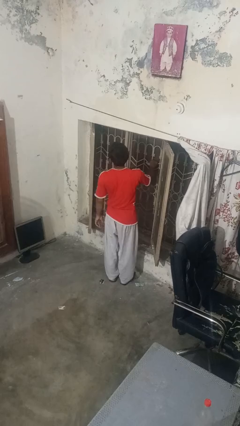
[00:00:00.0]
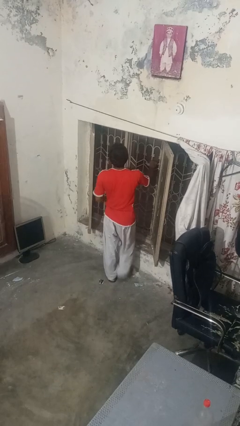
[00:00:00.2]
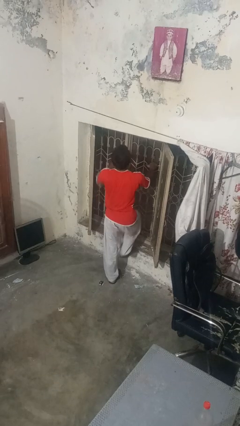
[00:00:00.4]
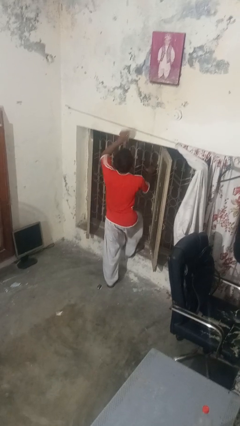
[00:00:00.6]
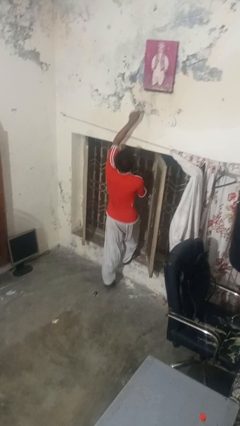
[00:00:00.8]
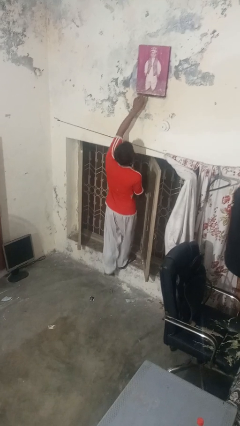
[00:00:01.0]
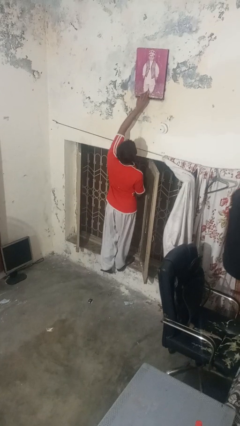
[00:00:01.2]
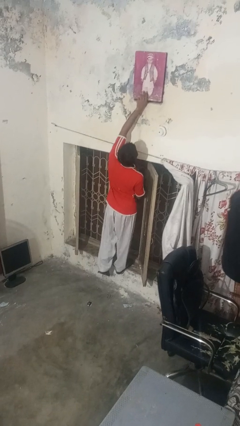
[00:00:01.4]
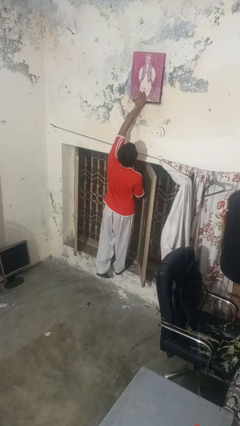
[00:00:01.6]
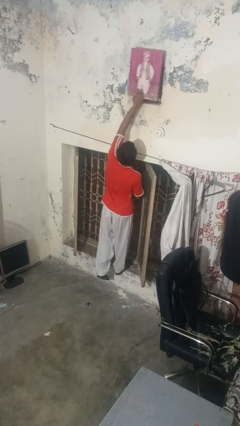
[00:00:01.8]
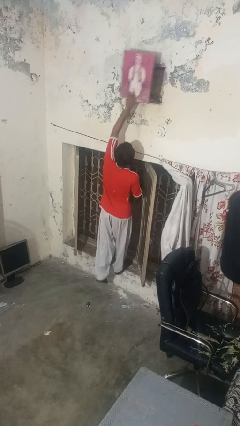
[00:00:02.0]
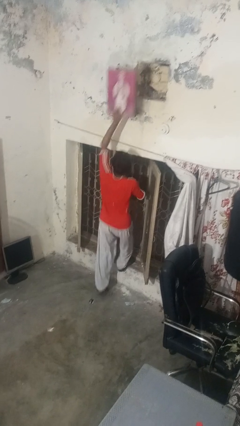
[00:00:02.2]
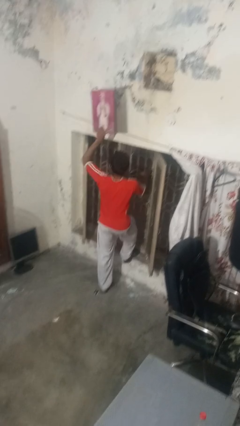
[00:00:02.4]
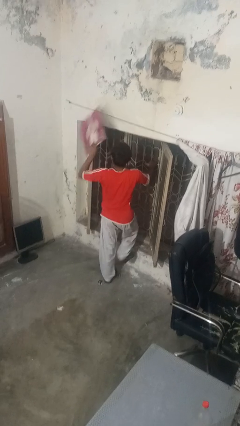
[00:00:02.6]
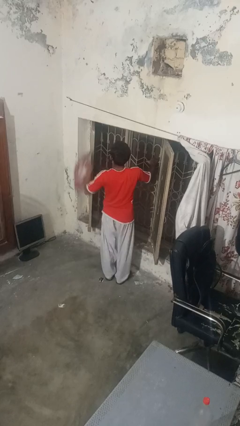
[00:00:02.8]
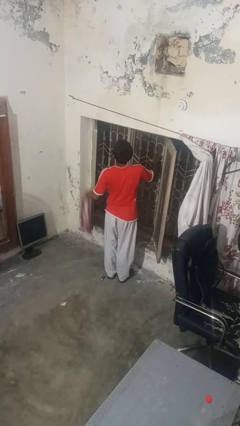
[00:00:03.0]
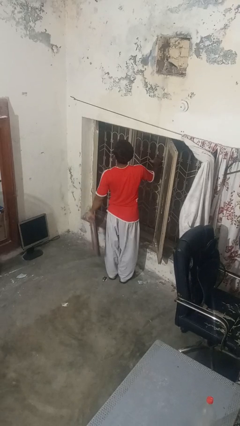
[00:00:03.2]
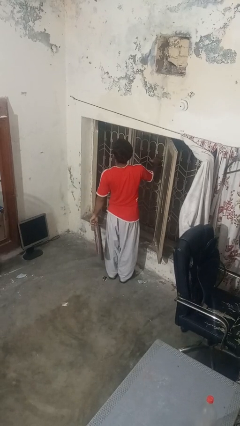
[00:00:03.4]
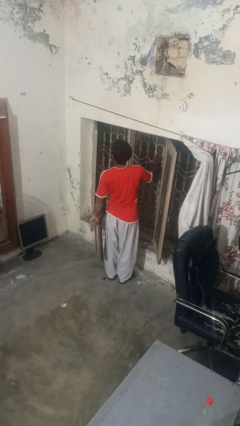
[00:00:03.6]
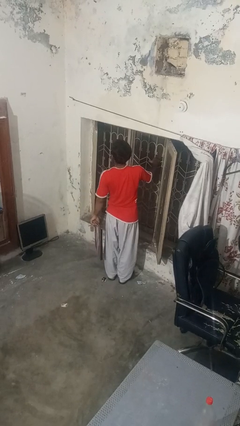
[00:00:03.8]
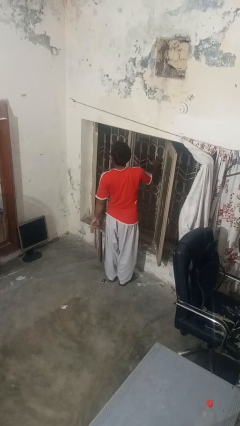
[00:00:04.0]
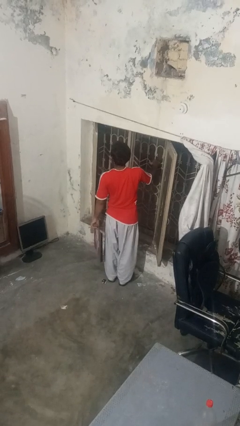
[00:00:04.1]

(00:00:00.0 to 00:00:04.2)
person takes down picture frame

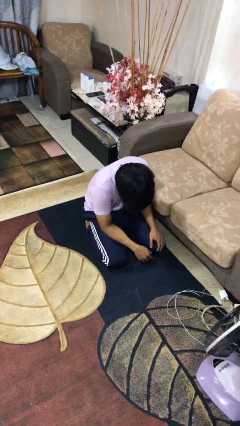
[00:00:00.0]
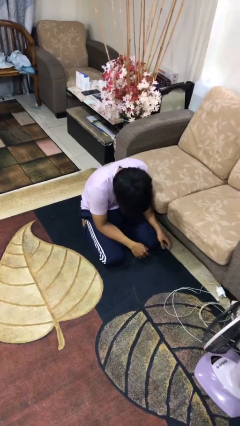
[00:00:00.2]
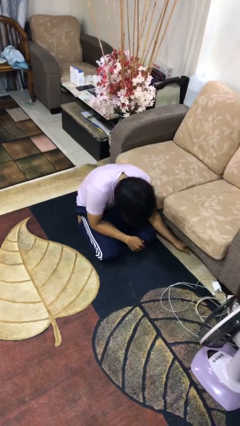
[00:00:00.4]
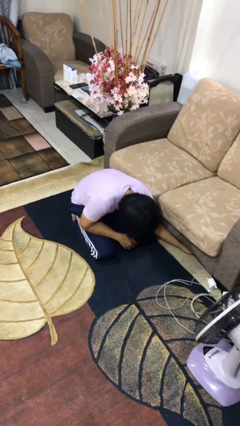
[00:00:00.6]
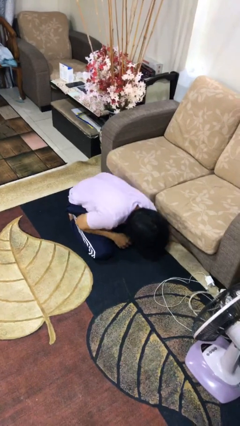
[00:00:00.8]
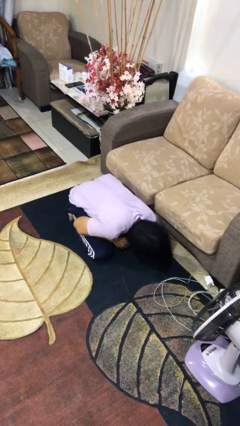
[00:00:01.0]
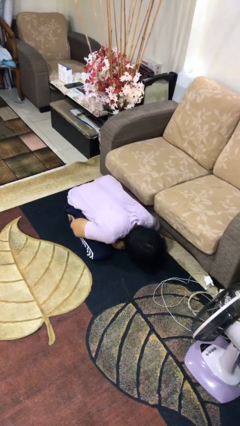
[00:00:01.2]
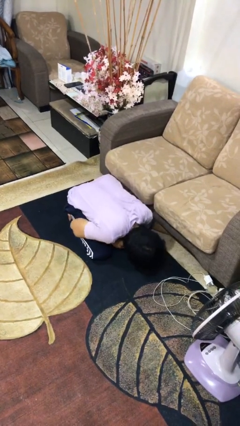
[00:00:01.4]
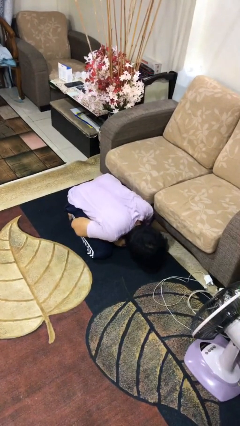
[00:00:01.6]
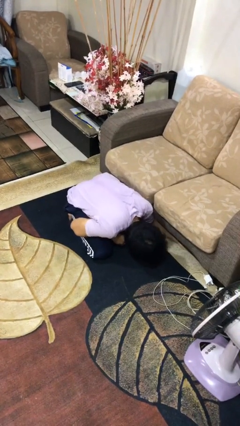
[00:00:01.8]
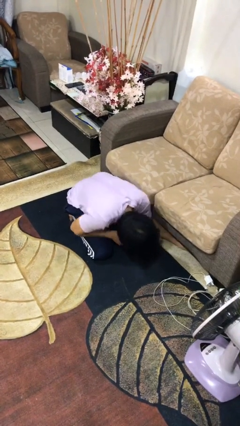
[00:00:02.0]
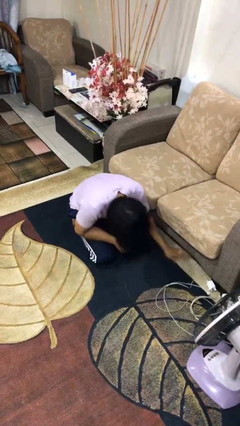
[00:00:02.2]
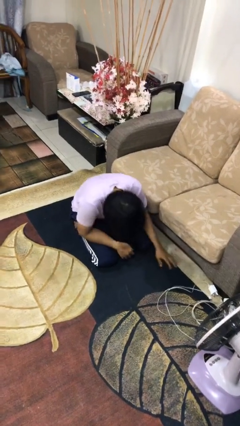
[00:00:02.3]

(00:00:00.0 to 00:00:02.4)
person searches under couch

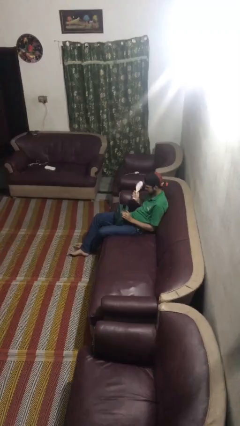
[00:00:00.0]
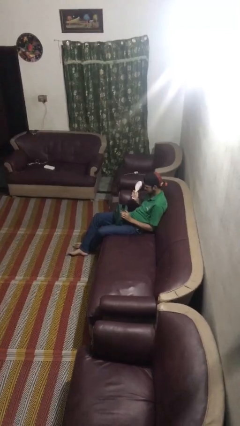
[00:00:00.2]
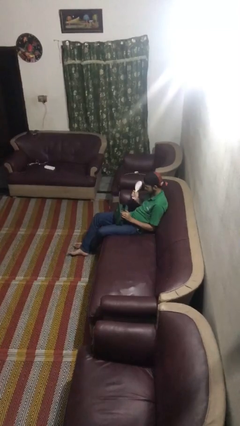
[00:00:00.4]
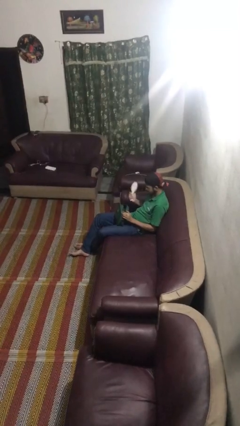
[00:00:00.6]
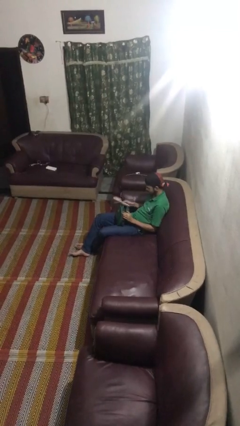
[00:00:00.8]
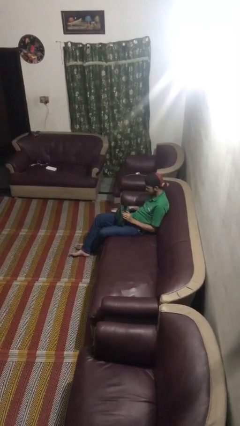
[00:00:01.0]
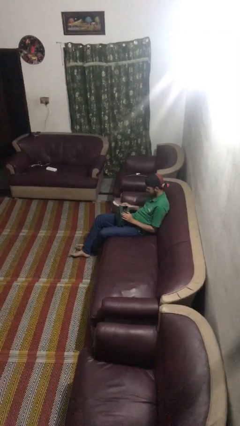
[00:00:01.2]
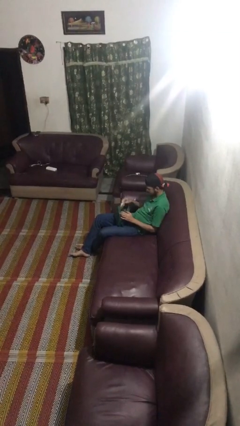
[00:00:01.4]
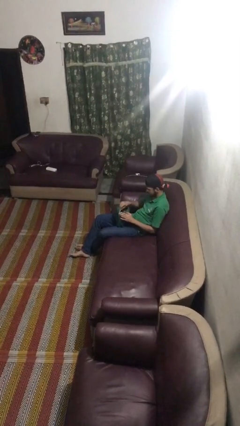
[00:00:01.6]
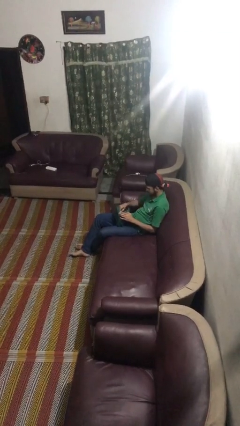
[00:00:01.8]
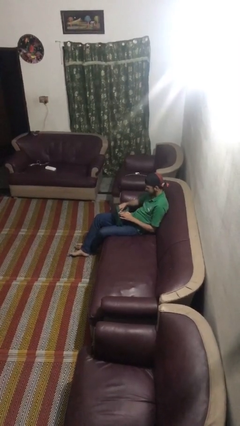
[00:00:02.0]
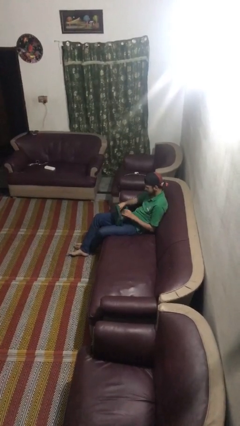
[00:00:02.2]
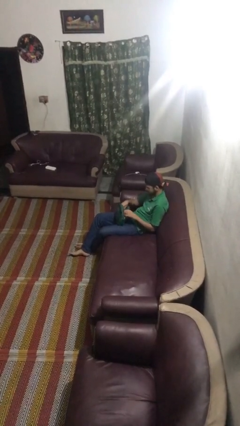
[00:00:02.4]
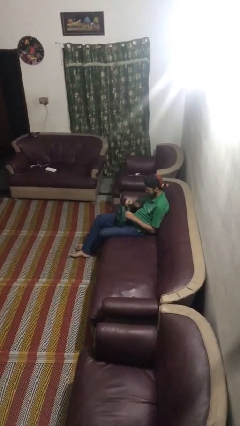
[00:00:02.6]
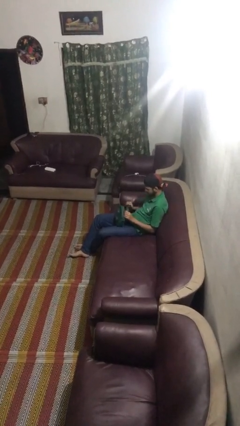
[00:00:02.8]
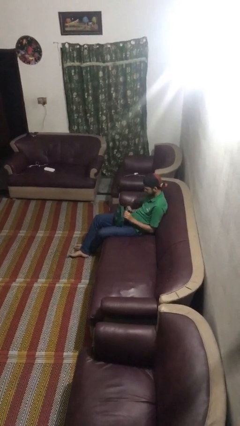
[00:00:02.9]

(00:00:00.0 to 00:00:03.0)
person puts object into purse

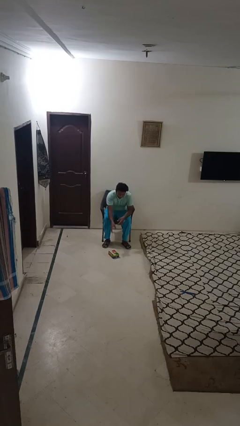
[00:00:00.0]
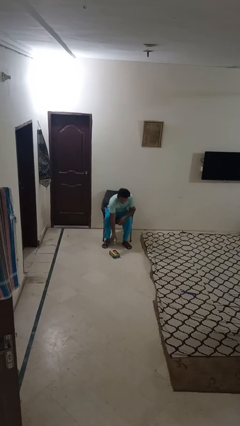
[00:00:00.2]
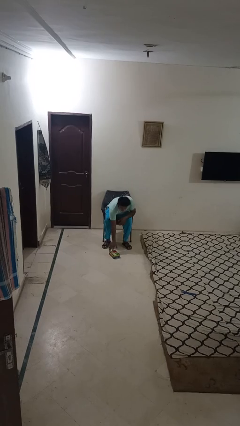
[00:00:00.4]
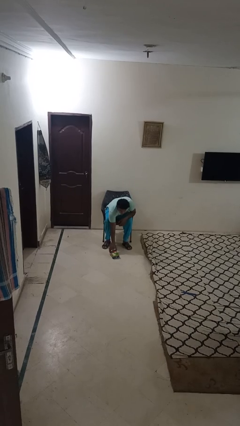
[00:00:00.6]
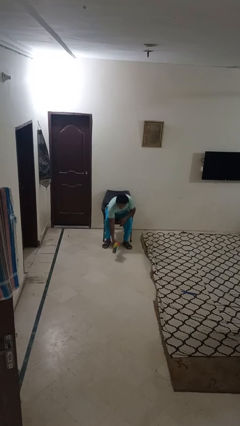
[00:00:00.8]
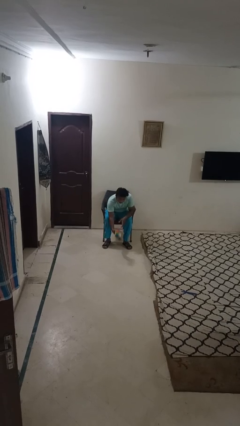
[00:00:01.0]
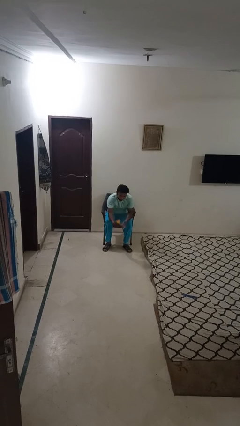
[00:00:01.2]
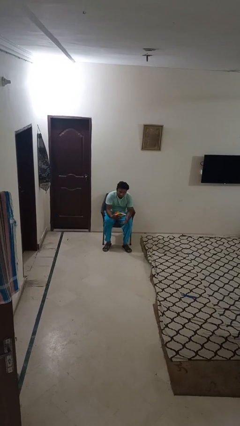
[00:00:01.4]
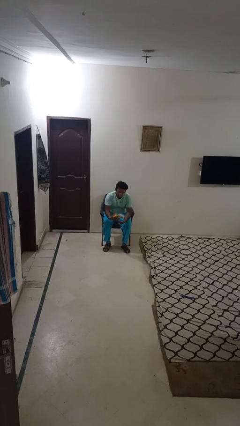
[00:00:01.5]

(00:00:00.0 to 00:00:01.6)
person picks up object from floor

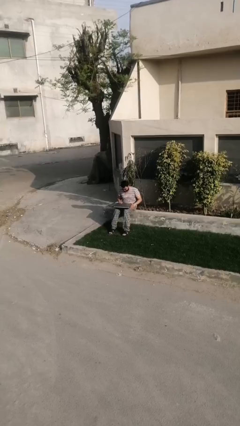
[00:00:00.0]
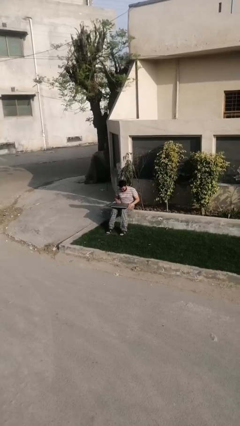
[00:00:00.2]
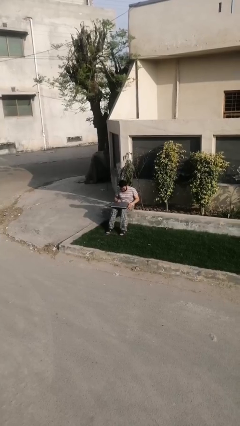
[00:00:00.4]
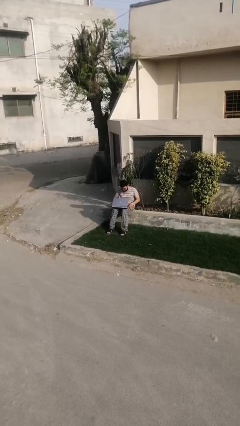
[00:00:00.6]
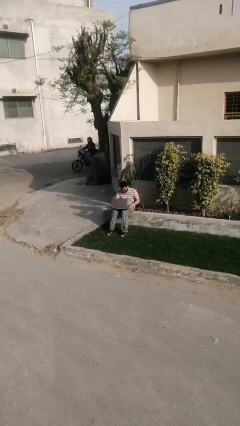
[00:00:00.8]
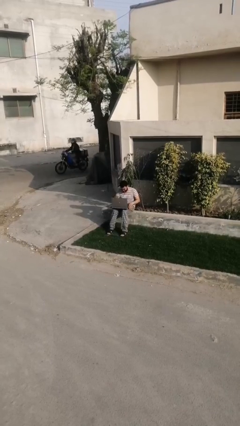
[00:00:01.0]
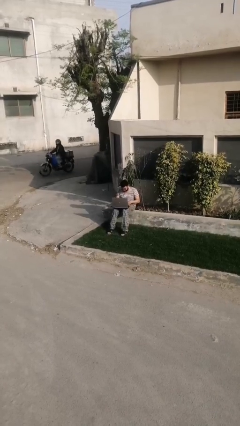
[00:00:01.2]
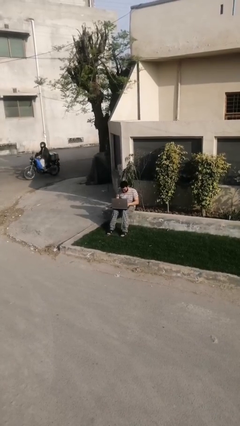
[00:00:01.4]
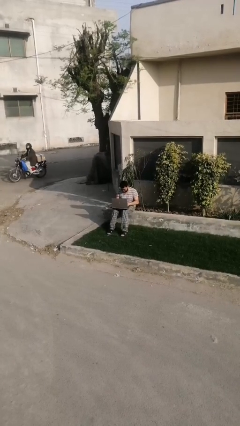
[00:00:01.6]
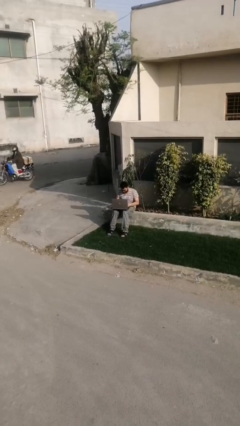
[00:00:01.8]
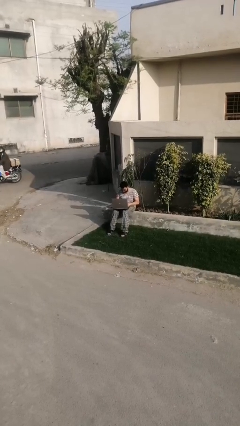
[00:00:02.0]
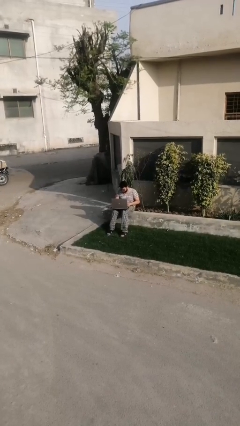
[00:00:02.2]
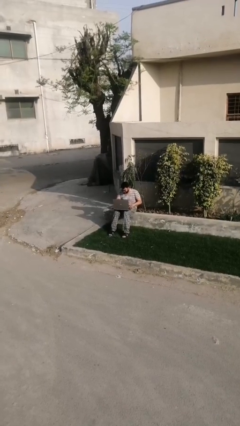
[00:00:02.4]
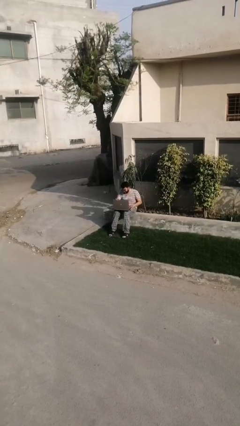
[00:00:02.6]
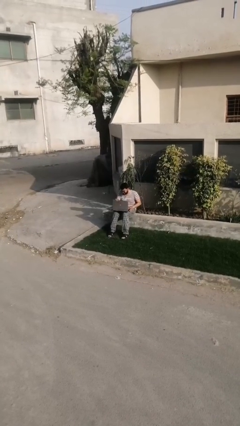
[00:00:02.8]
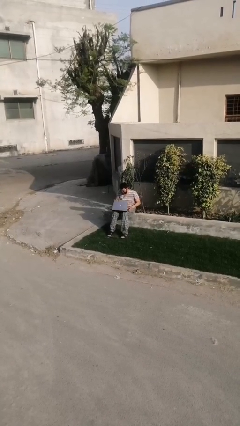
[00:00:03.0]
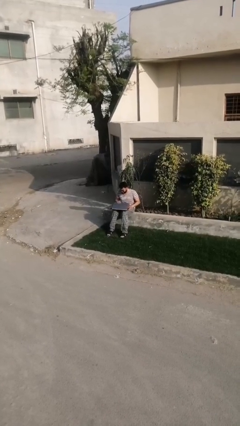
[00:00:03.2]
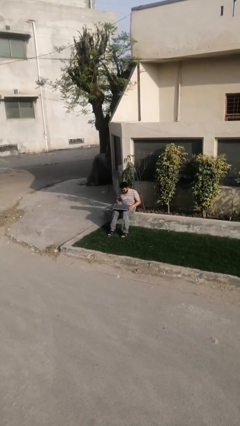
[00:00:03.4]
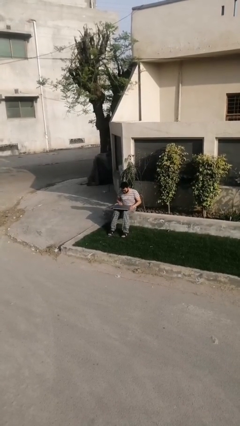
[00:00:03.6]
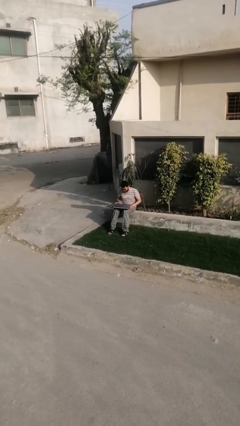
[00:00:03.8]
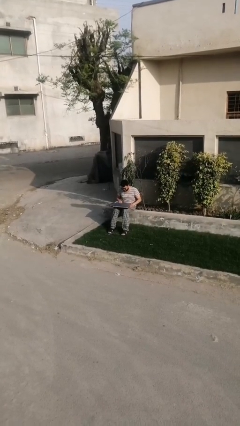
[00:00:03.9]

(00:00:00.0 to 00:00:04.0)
person interacts with laptop

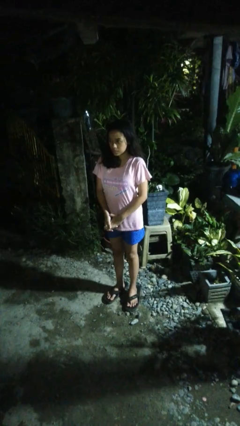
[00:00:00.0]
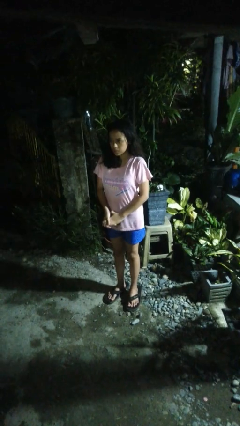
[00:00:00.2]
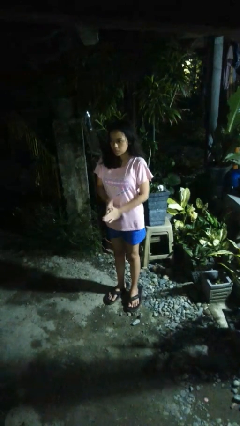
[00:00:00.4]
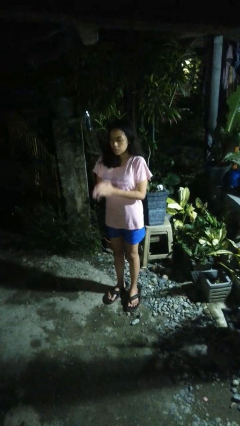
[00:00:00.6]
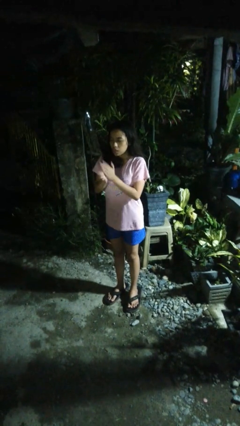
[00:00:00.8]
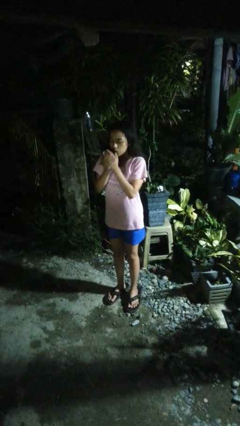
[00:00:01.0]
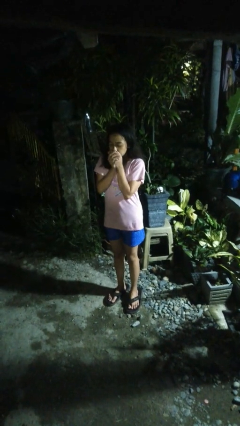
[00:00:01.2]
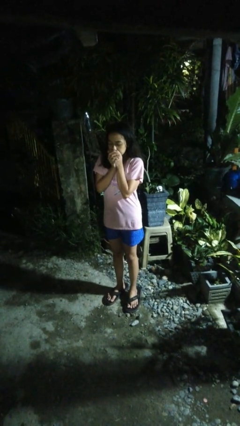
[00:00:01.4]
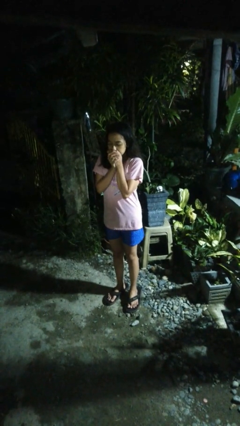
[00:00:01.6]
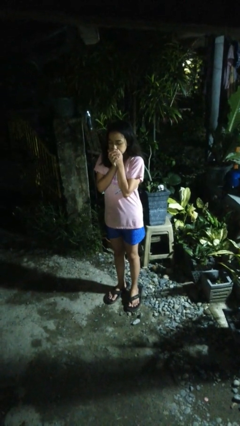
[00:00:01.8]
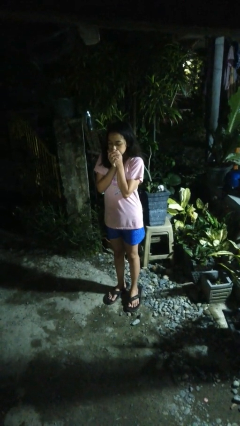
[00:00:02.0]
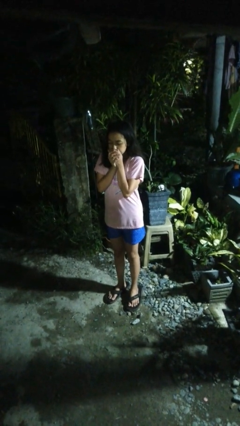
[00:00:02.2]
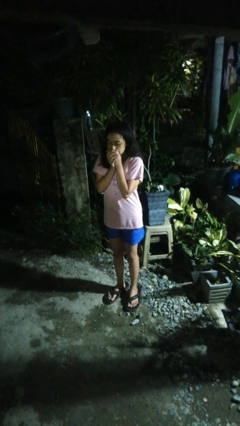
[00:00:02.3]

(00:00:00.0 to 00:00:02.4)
person blows into hands
